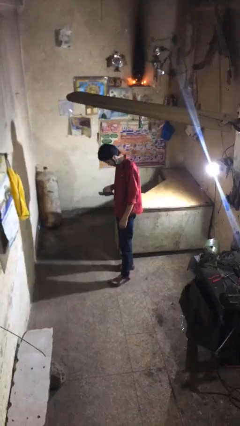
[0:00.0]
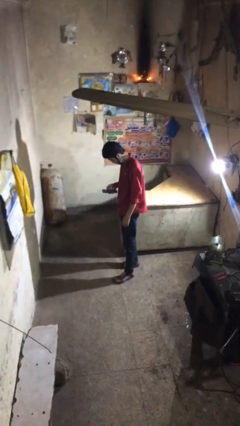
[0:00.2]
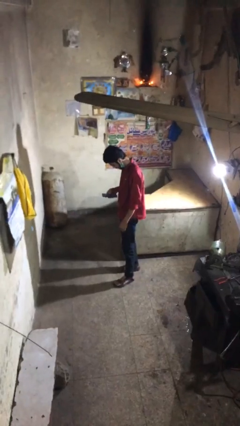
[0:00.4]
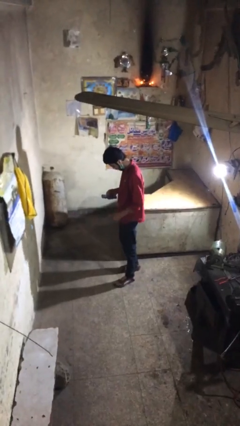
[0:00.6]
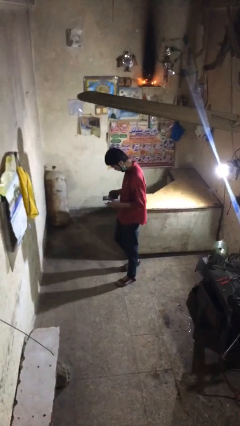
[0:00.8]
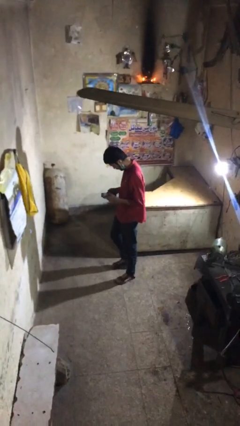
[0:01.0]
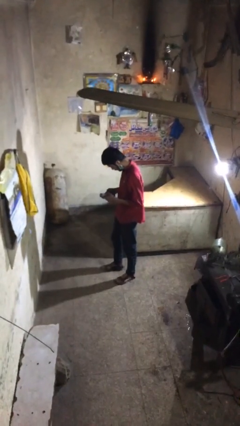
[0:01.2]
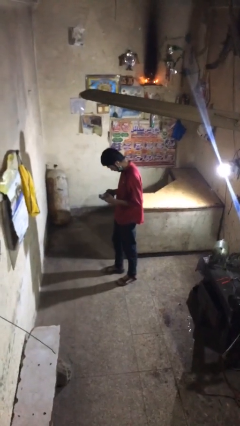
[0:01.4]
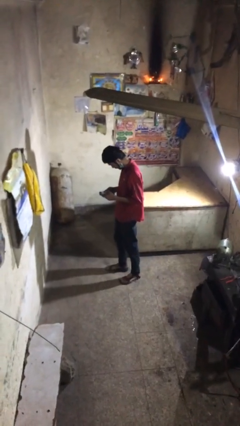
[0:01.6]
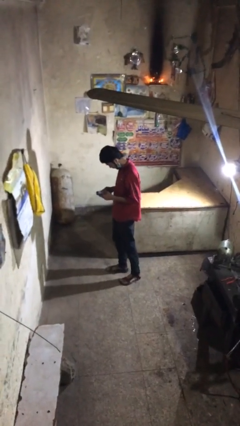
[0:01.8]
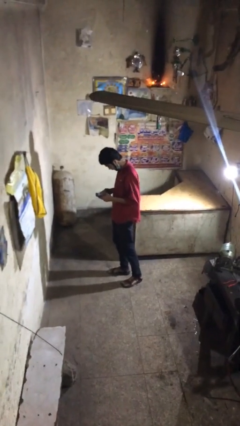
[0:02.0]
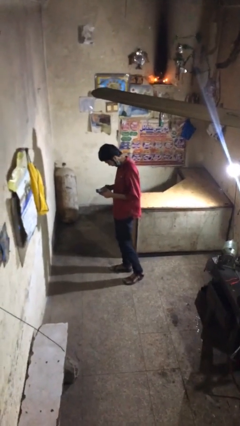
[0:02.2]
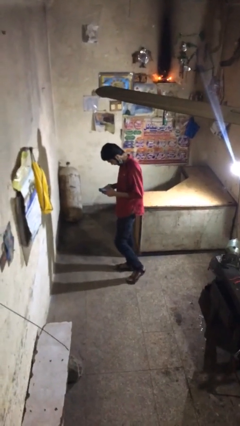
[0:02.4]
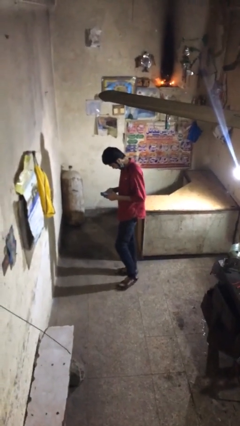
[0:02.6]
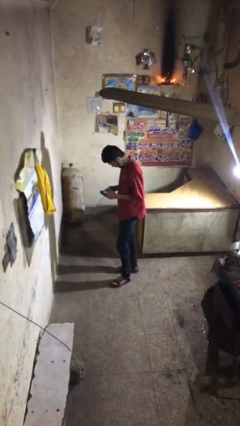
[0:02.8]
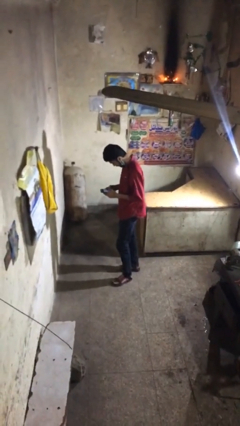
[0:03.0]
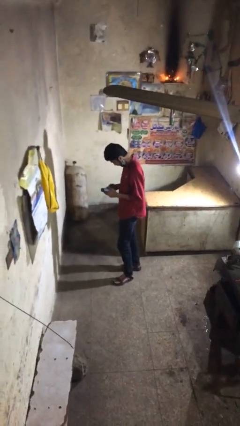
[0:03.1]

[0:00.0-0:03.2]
person texts on phone

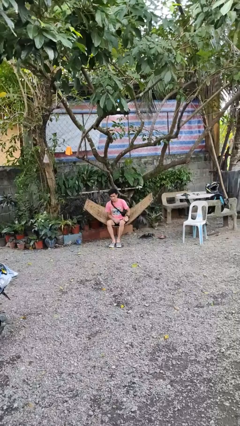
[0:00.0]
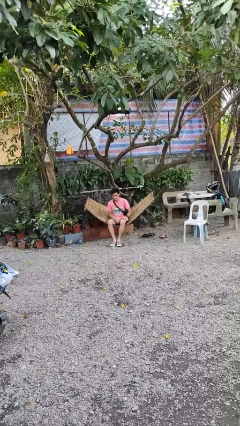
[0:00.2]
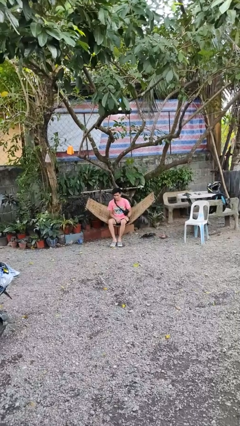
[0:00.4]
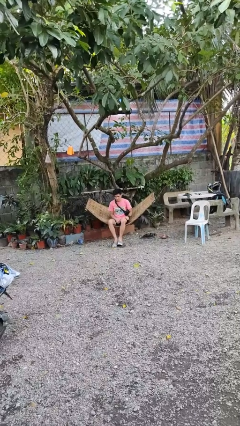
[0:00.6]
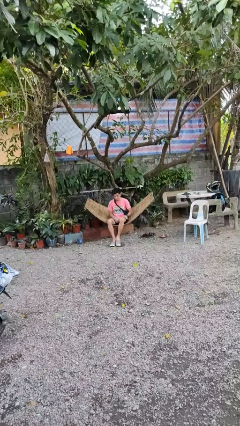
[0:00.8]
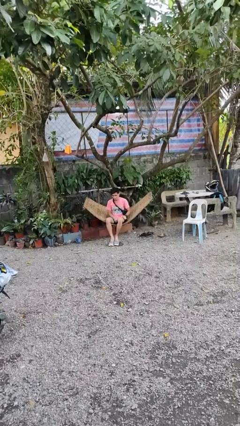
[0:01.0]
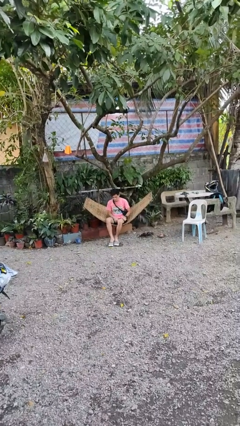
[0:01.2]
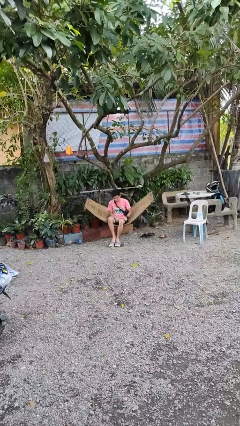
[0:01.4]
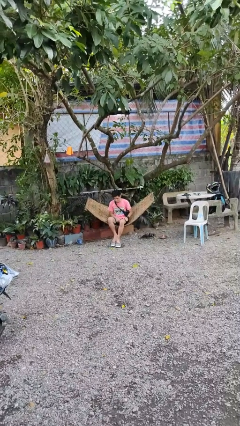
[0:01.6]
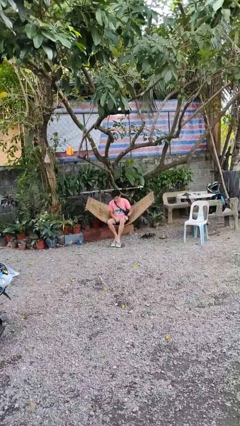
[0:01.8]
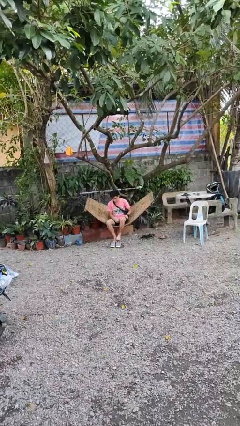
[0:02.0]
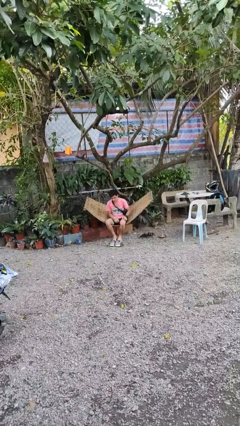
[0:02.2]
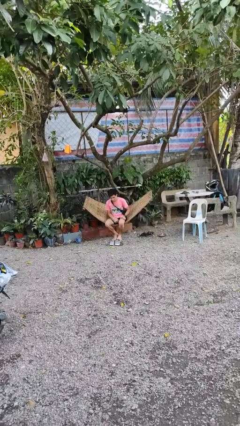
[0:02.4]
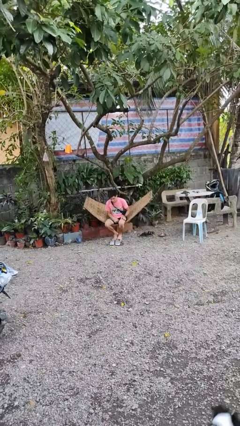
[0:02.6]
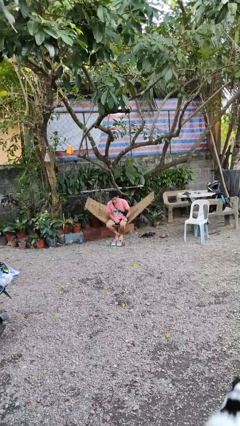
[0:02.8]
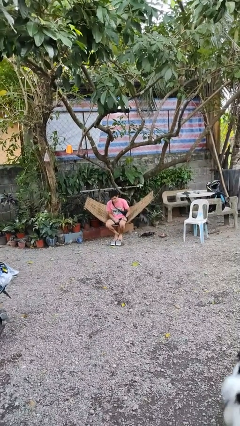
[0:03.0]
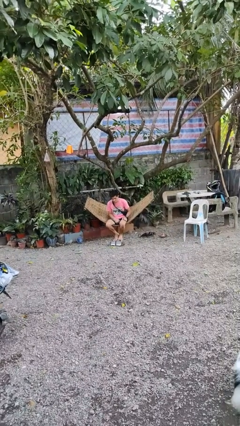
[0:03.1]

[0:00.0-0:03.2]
person takes off shoes

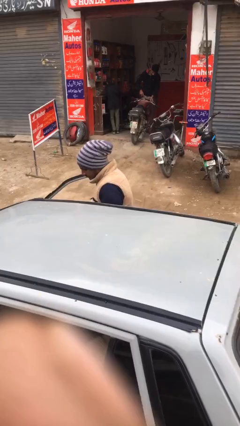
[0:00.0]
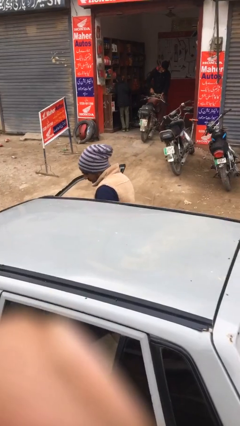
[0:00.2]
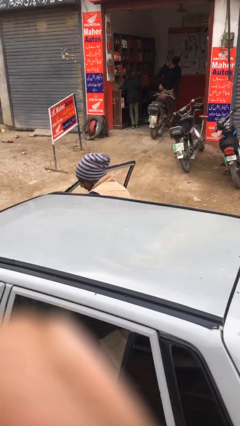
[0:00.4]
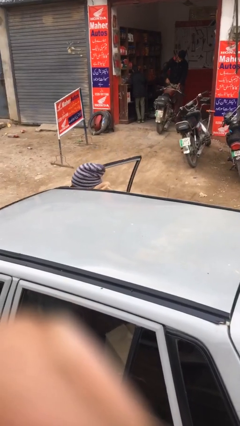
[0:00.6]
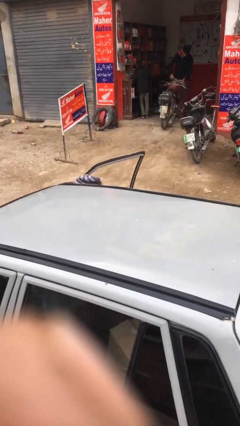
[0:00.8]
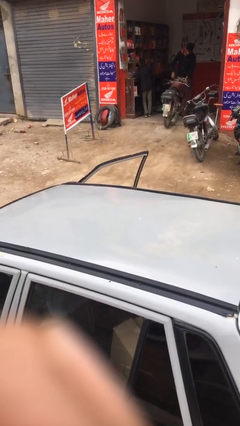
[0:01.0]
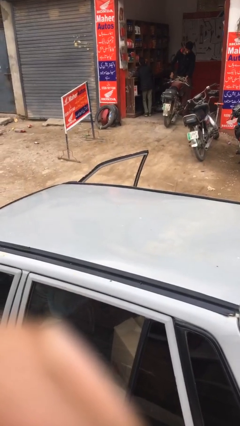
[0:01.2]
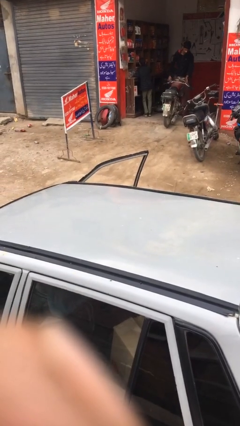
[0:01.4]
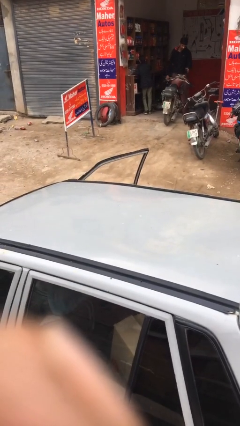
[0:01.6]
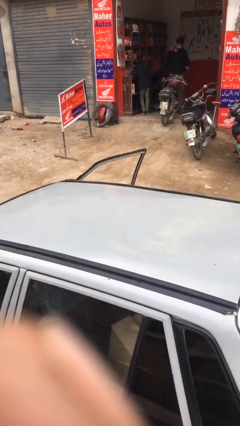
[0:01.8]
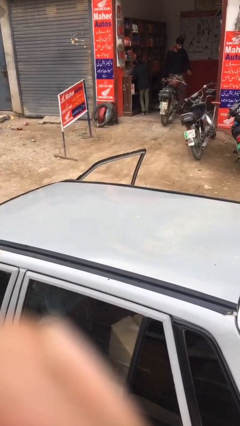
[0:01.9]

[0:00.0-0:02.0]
person enters car

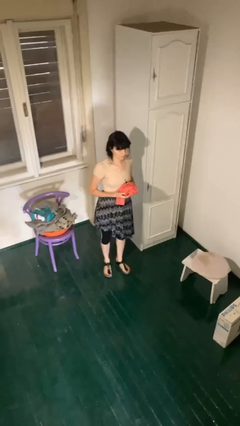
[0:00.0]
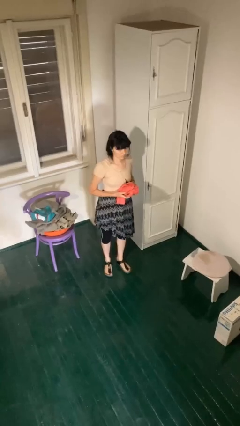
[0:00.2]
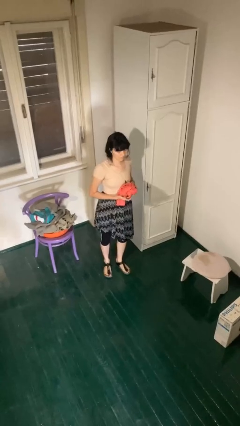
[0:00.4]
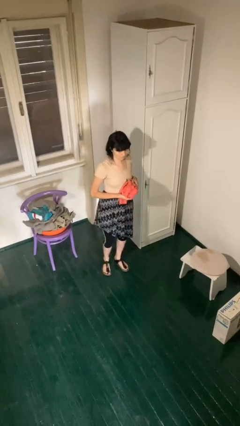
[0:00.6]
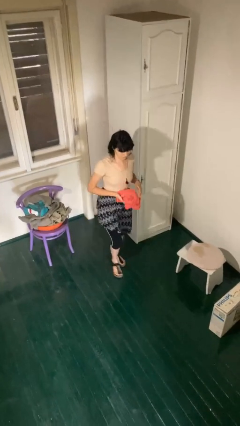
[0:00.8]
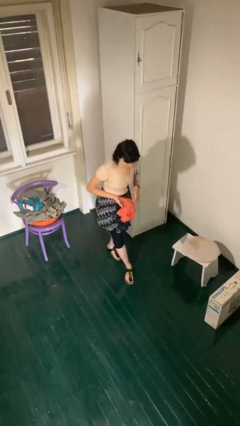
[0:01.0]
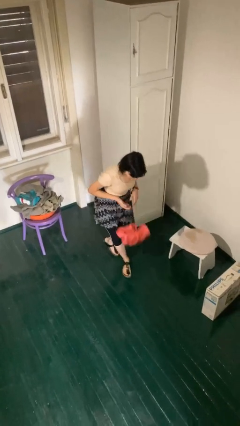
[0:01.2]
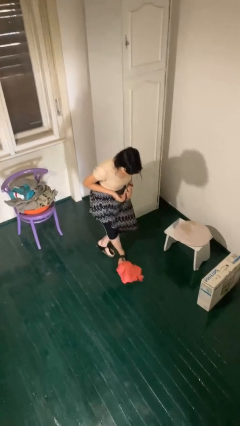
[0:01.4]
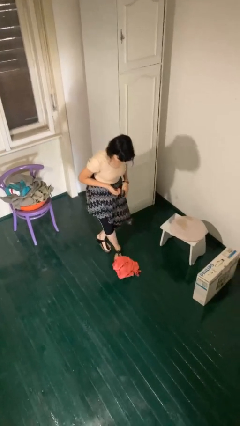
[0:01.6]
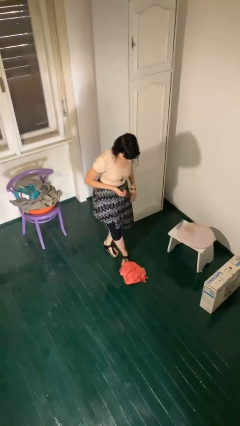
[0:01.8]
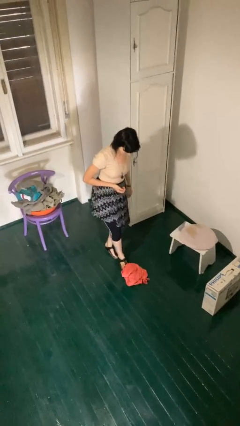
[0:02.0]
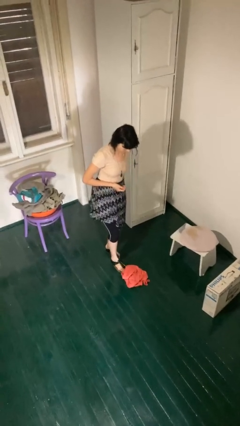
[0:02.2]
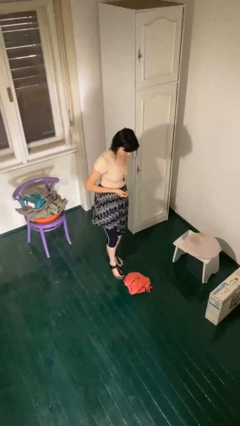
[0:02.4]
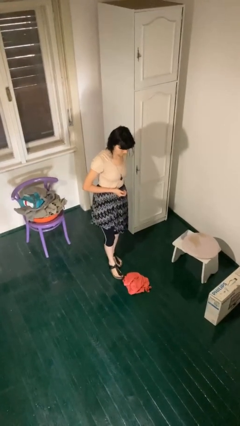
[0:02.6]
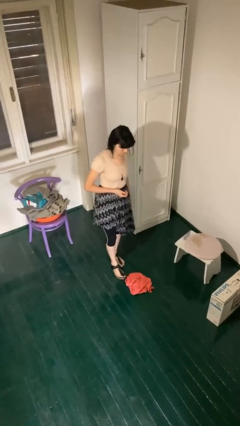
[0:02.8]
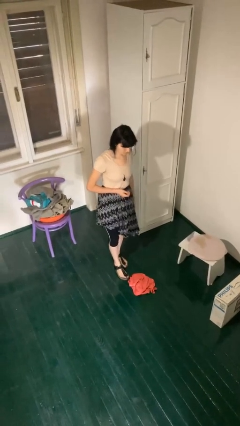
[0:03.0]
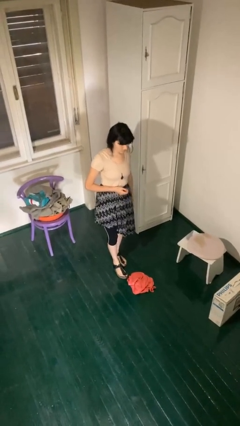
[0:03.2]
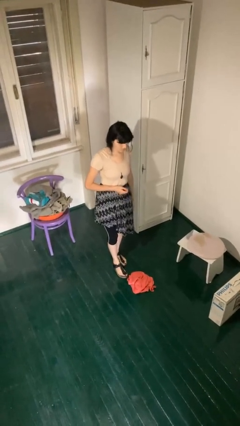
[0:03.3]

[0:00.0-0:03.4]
person drops object

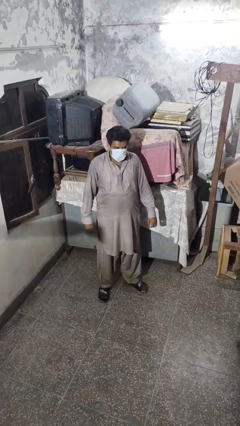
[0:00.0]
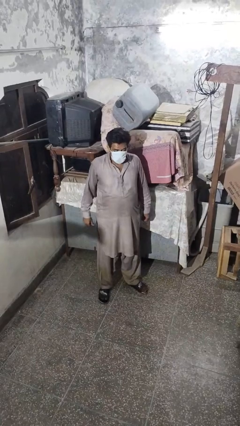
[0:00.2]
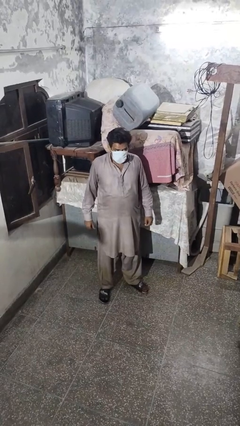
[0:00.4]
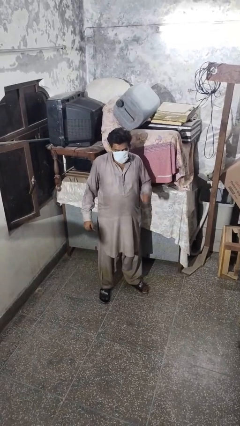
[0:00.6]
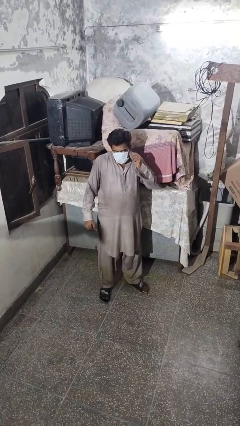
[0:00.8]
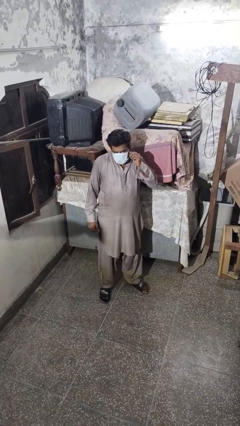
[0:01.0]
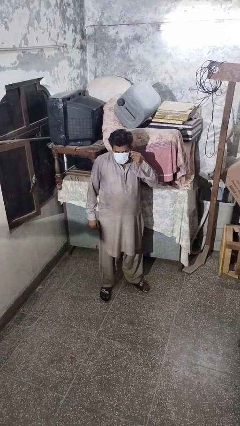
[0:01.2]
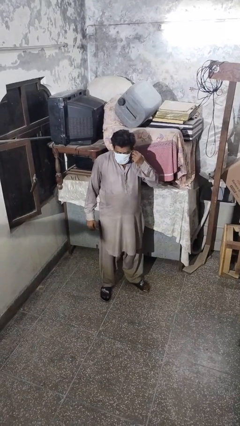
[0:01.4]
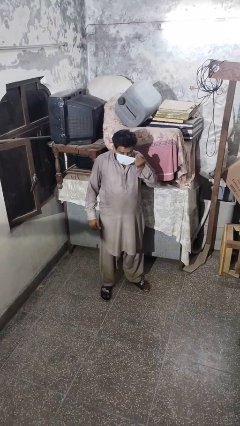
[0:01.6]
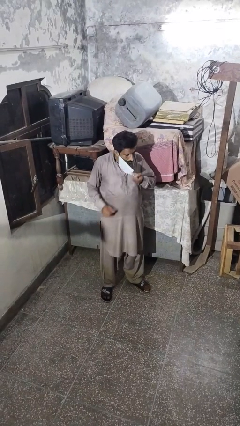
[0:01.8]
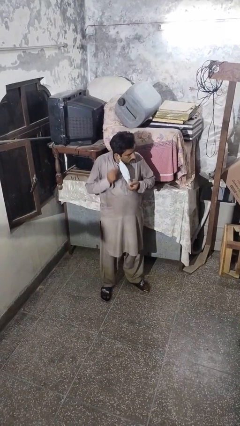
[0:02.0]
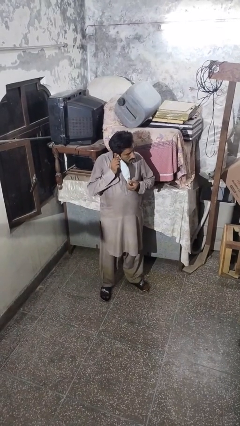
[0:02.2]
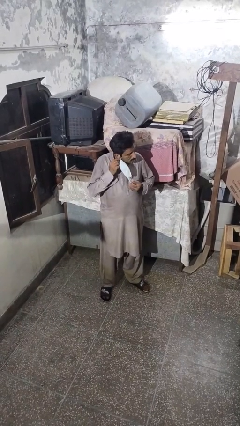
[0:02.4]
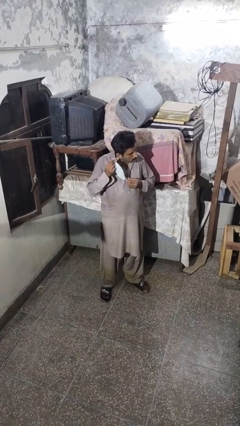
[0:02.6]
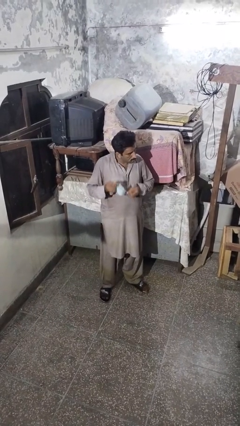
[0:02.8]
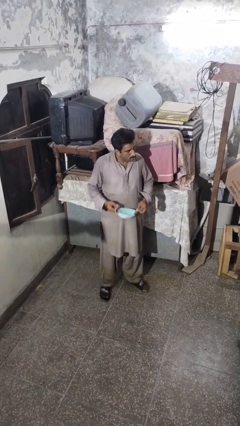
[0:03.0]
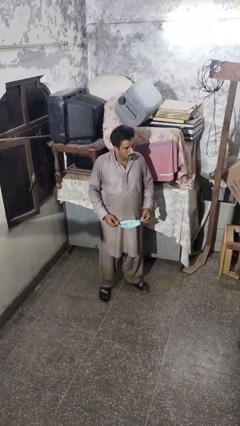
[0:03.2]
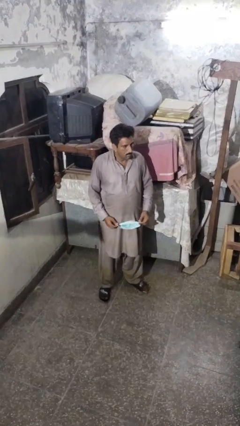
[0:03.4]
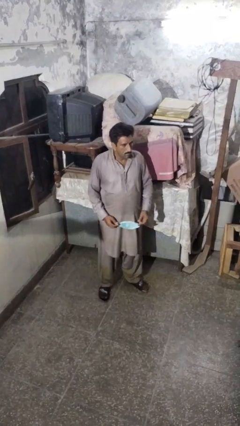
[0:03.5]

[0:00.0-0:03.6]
person takes off facemask

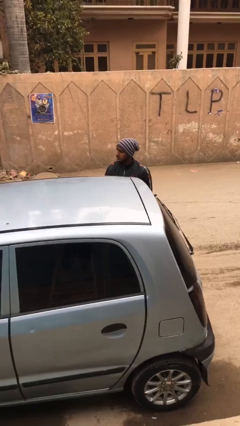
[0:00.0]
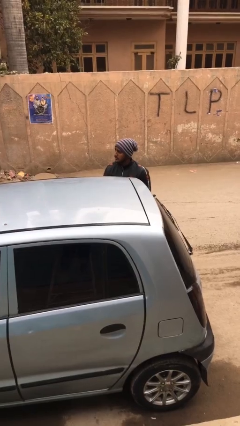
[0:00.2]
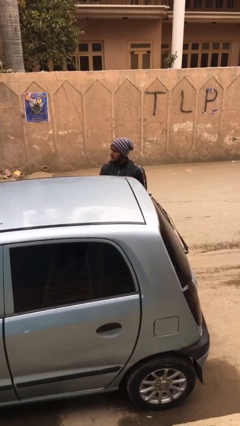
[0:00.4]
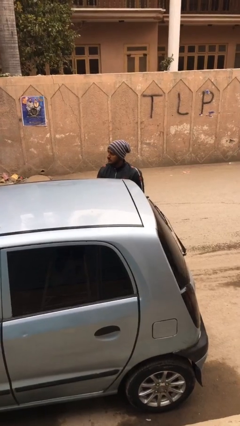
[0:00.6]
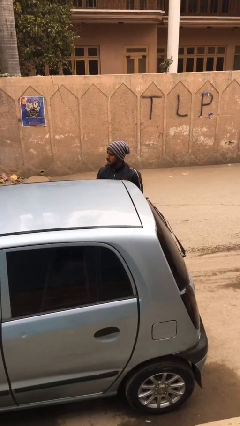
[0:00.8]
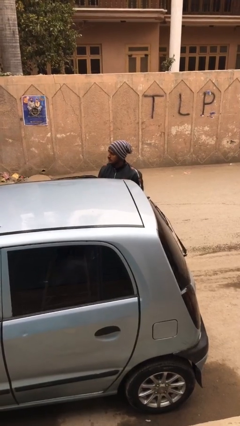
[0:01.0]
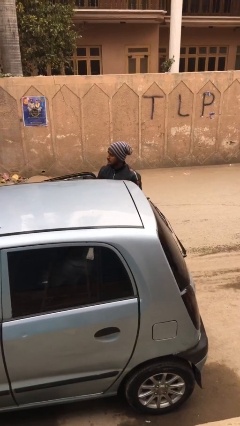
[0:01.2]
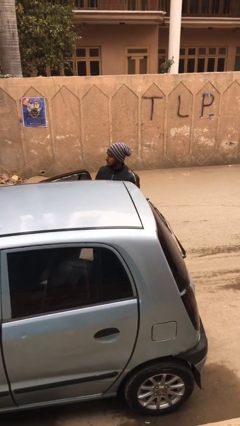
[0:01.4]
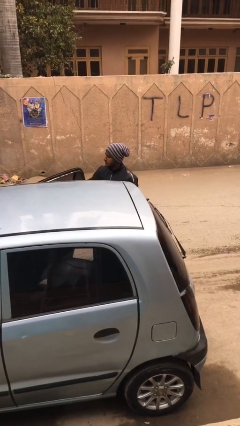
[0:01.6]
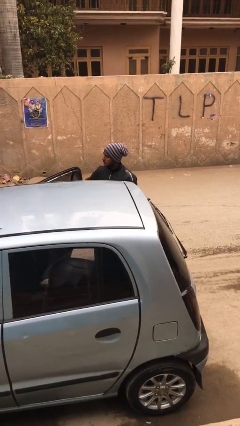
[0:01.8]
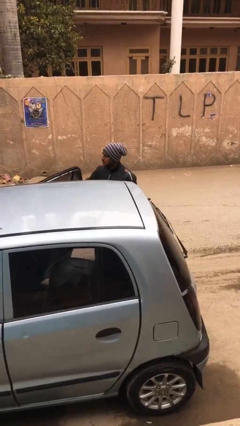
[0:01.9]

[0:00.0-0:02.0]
person opens car door

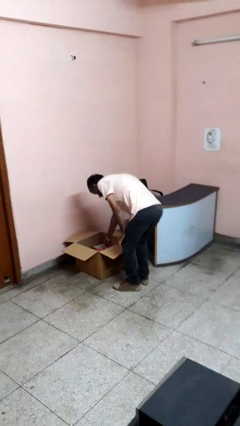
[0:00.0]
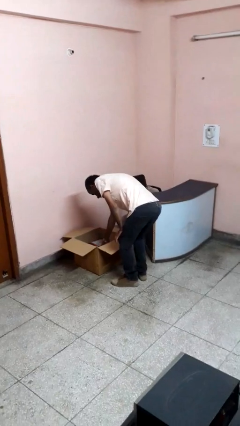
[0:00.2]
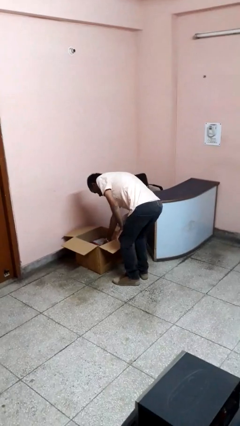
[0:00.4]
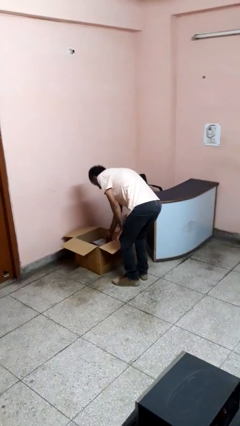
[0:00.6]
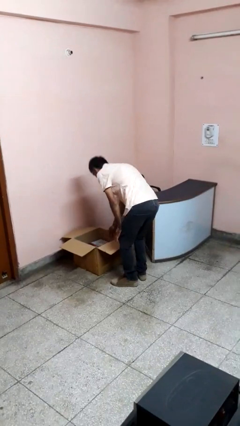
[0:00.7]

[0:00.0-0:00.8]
person puts object into box
